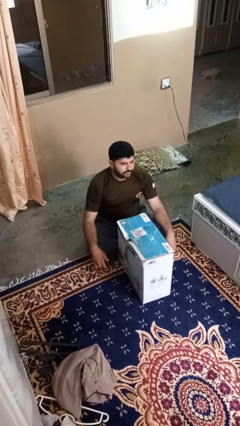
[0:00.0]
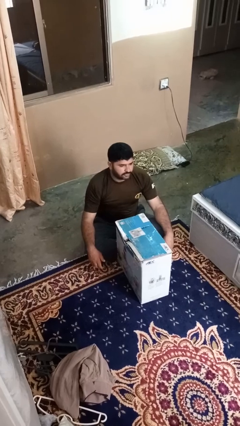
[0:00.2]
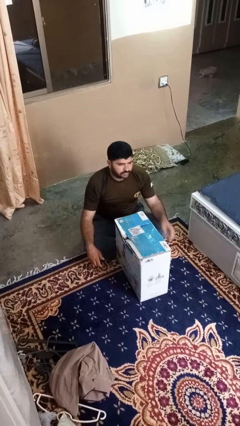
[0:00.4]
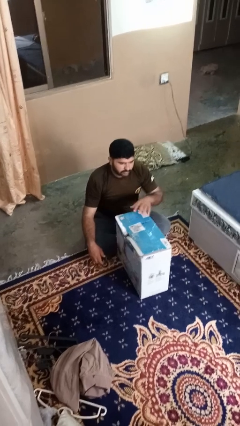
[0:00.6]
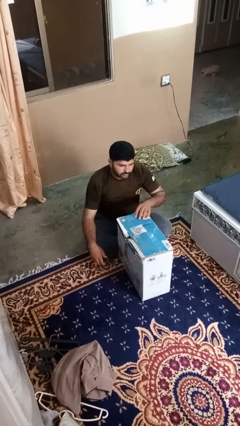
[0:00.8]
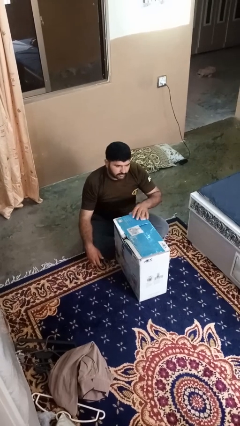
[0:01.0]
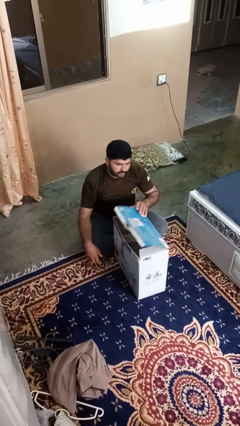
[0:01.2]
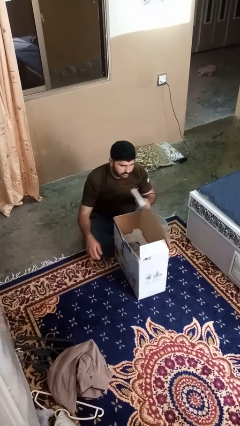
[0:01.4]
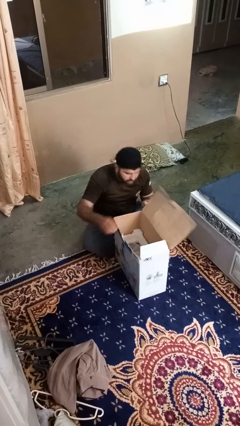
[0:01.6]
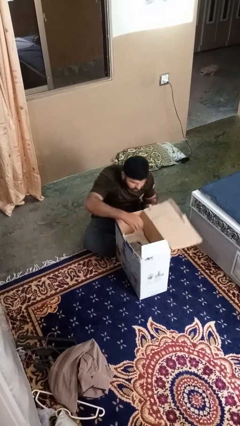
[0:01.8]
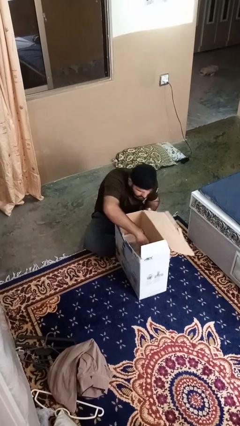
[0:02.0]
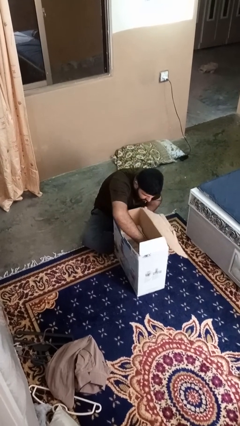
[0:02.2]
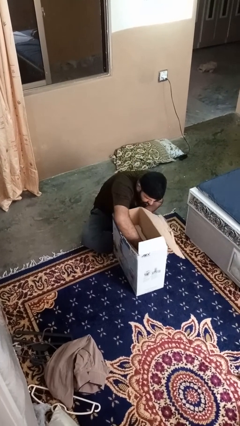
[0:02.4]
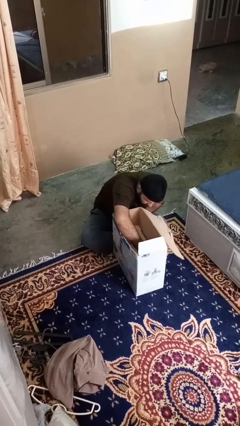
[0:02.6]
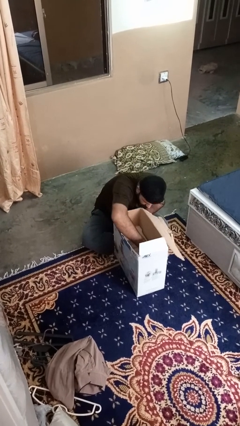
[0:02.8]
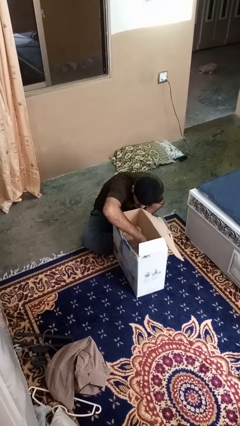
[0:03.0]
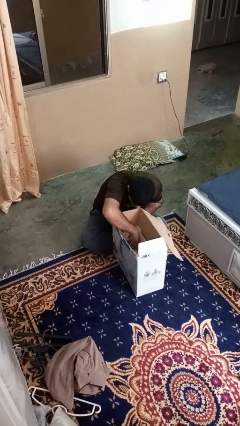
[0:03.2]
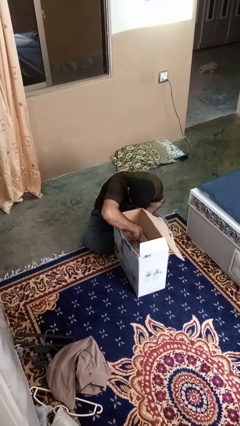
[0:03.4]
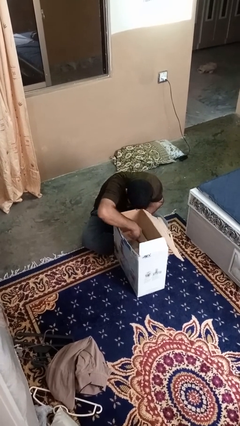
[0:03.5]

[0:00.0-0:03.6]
person searches in box

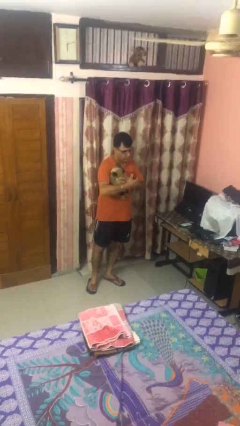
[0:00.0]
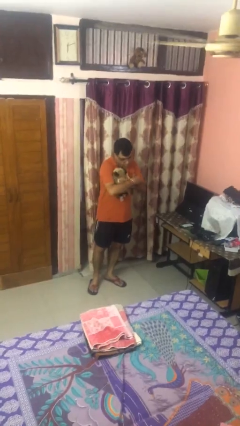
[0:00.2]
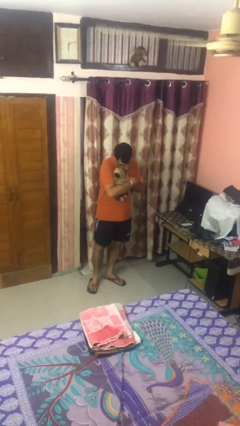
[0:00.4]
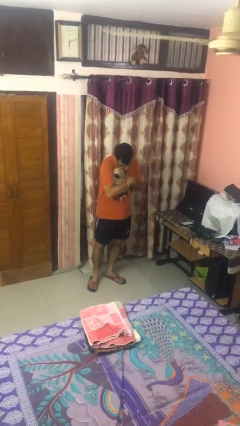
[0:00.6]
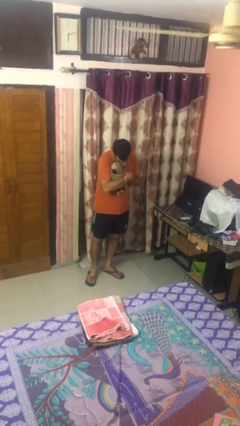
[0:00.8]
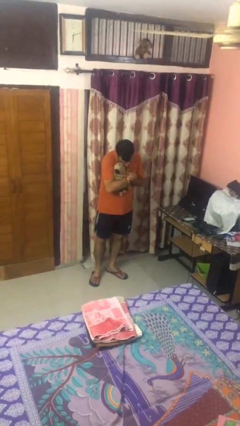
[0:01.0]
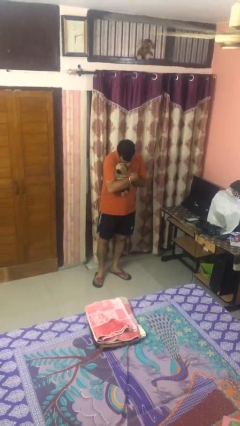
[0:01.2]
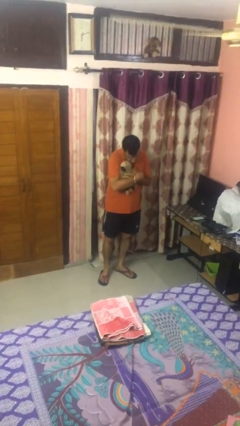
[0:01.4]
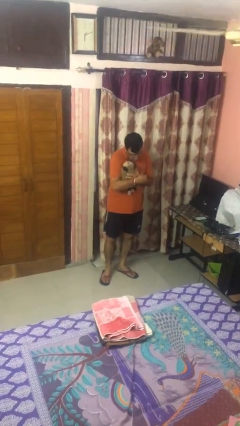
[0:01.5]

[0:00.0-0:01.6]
person hugs stuffed animal

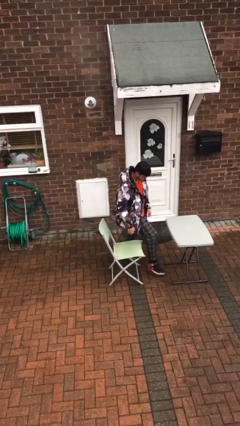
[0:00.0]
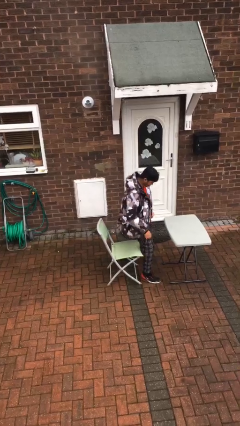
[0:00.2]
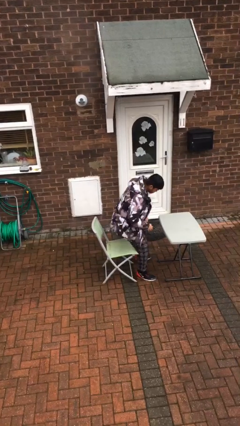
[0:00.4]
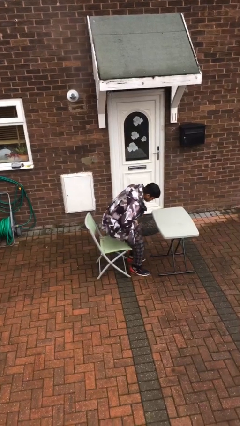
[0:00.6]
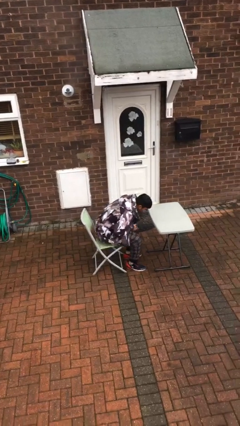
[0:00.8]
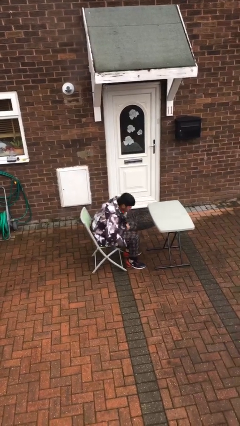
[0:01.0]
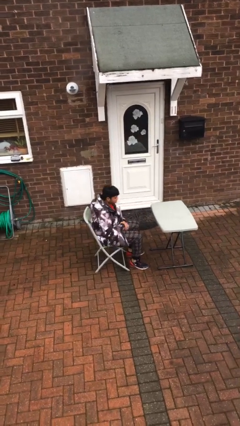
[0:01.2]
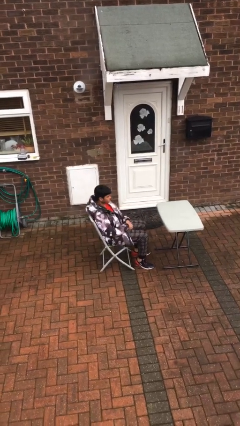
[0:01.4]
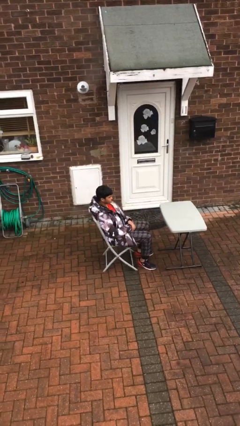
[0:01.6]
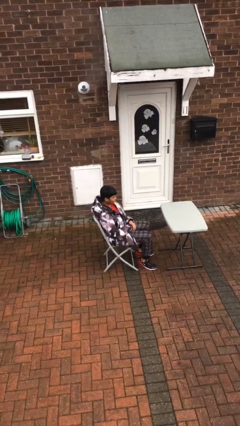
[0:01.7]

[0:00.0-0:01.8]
person sits down

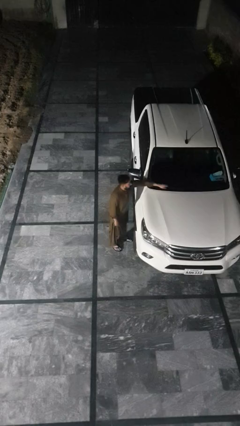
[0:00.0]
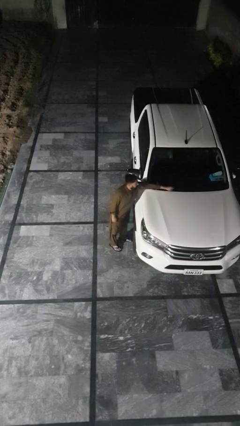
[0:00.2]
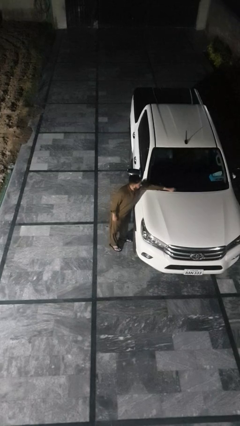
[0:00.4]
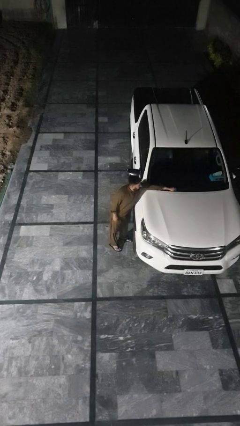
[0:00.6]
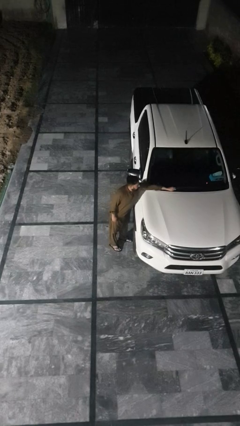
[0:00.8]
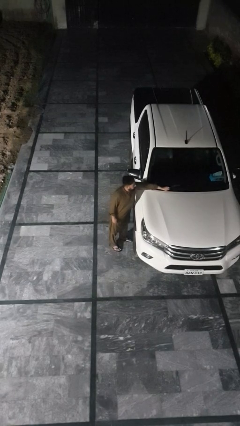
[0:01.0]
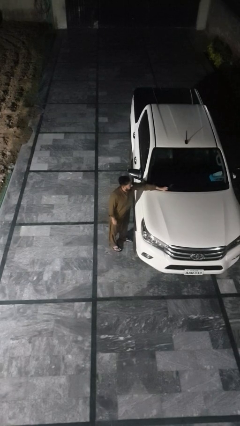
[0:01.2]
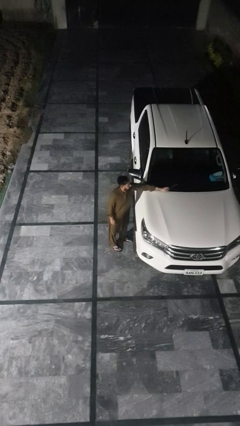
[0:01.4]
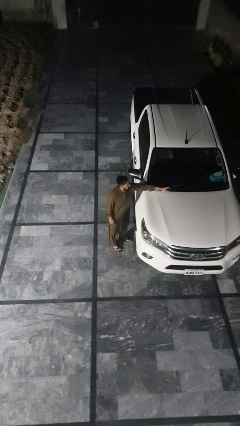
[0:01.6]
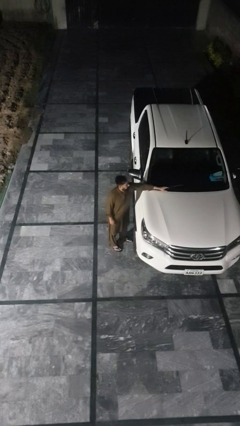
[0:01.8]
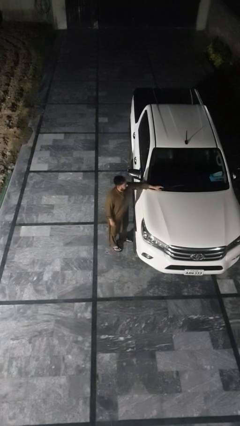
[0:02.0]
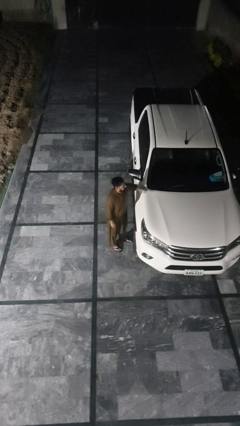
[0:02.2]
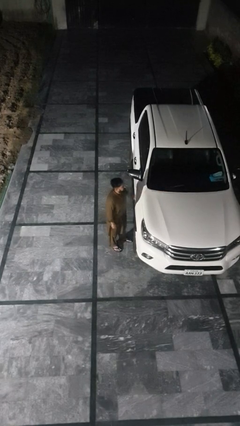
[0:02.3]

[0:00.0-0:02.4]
person flips up car wipers

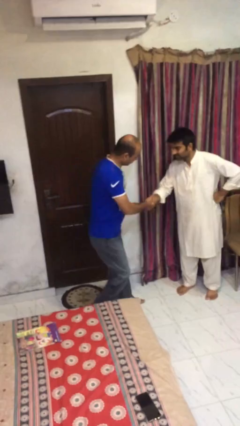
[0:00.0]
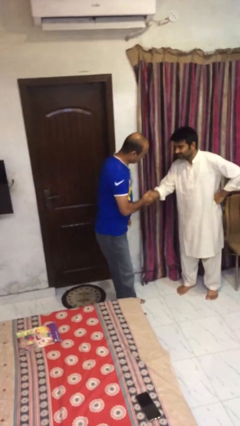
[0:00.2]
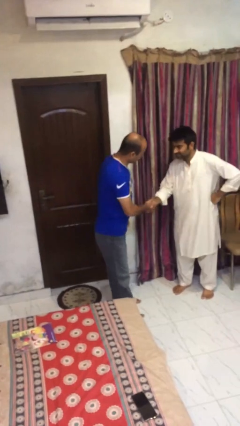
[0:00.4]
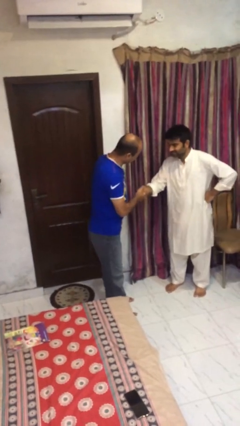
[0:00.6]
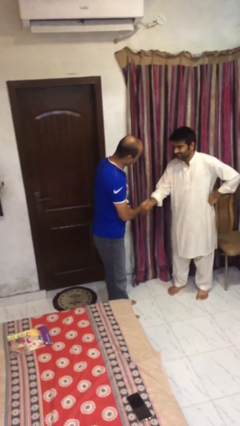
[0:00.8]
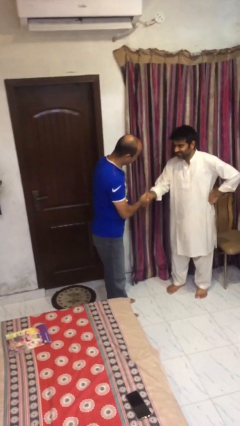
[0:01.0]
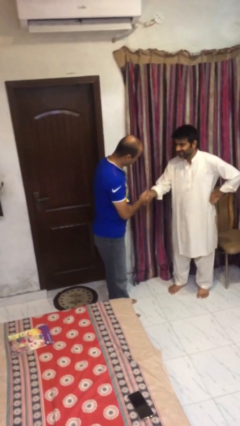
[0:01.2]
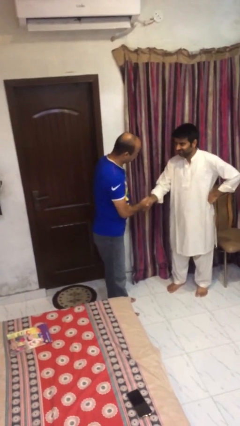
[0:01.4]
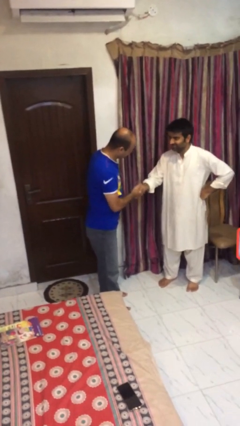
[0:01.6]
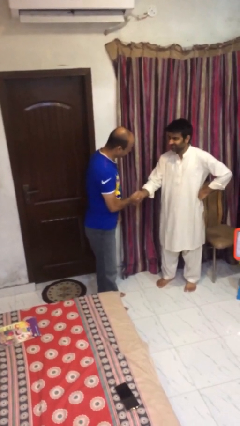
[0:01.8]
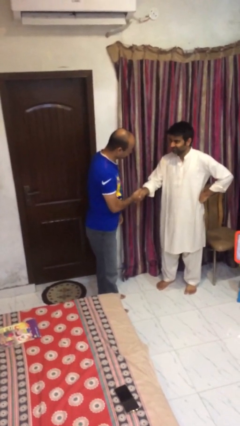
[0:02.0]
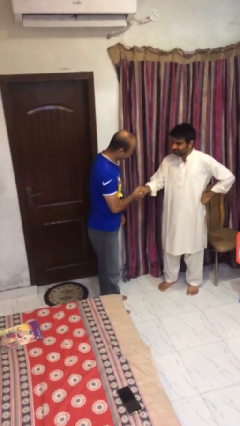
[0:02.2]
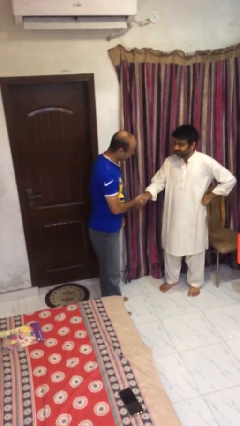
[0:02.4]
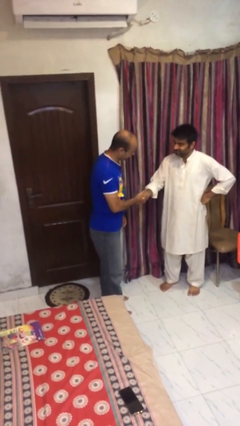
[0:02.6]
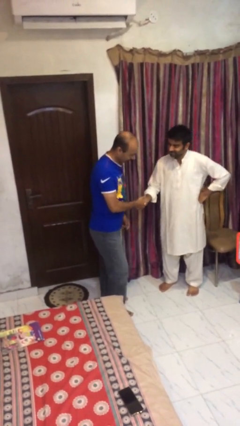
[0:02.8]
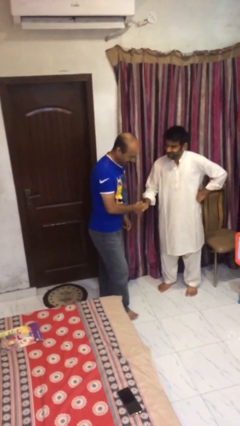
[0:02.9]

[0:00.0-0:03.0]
person shakes hand

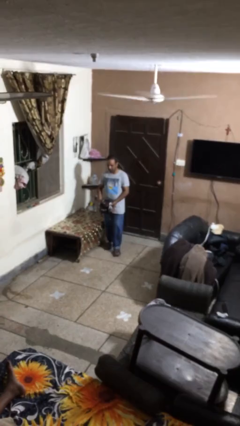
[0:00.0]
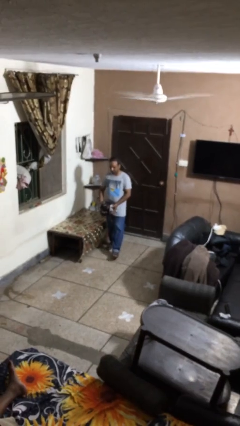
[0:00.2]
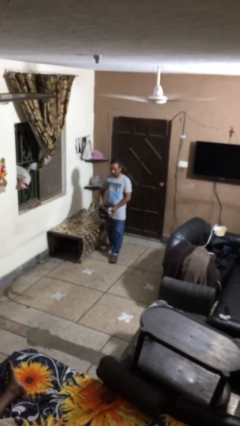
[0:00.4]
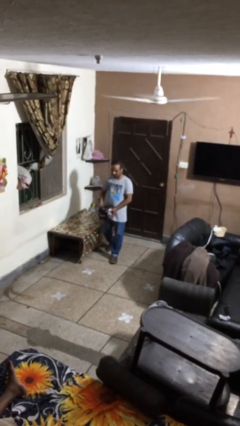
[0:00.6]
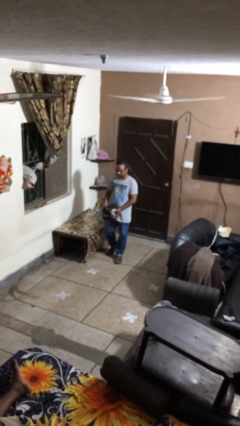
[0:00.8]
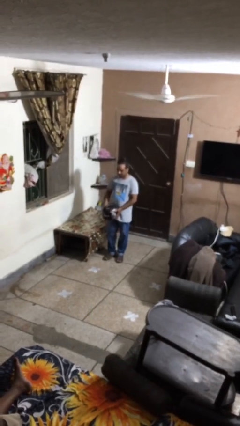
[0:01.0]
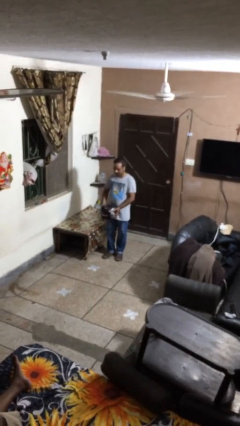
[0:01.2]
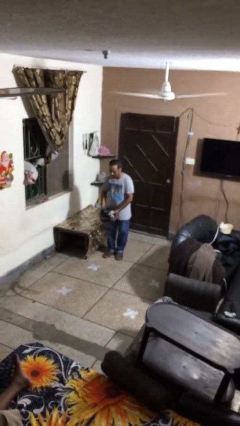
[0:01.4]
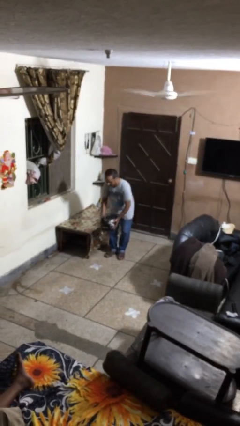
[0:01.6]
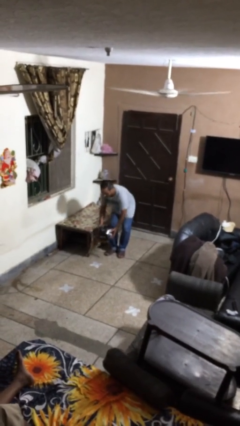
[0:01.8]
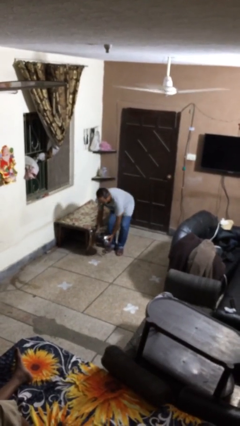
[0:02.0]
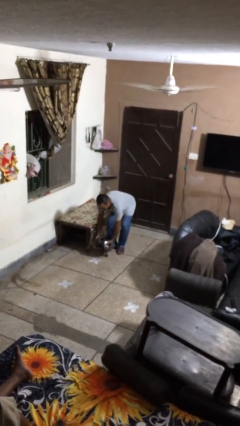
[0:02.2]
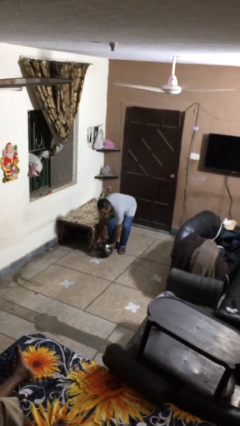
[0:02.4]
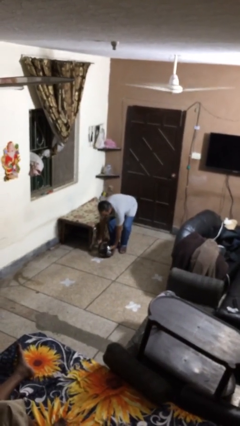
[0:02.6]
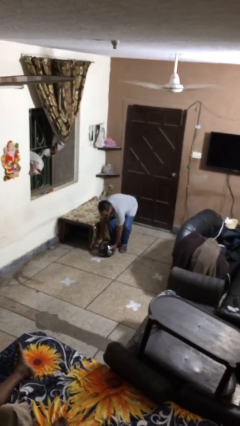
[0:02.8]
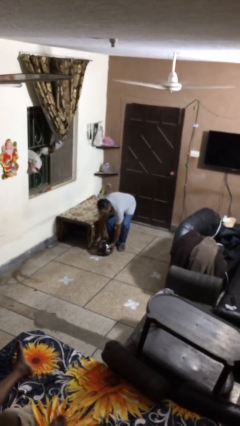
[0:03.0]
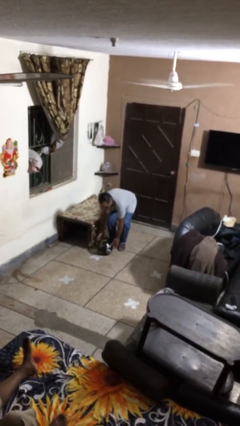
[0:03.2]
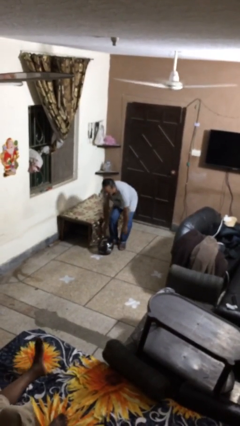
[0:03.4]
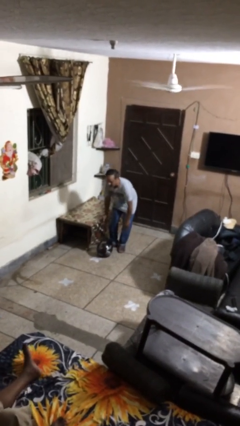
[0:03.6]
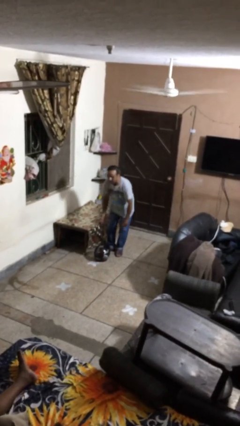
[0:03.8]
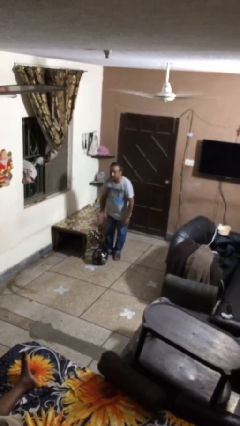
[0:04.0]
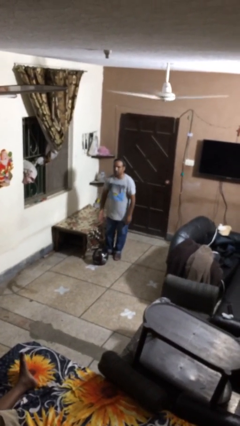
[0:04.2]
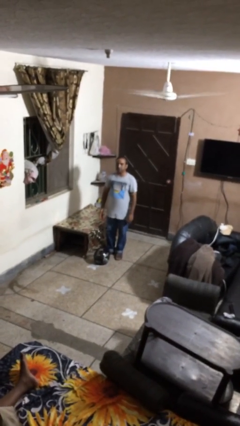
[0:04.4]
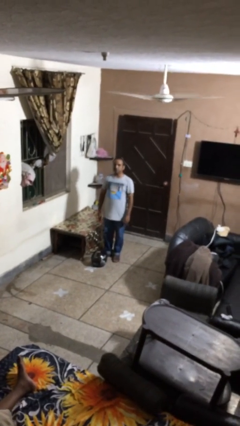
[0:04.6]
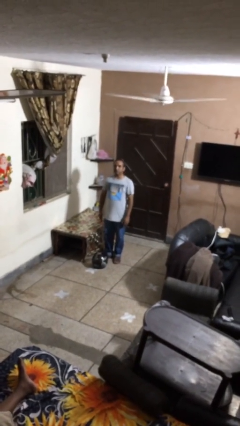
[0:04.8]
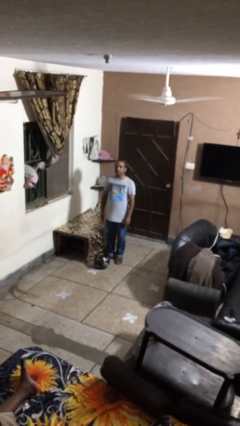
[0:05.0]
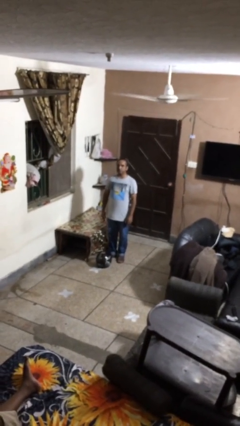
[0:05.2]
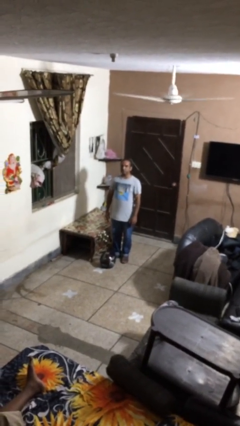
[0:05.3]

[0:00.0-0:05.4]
person puts down object on floor
